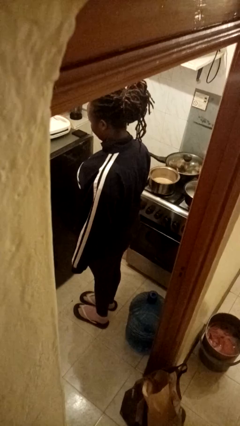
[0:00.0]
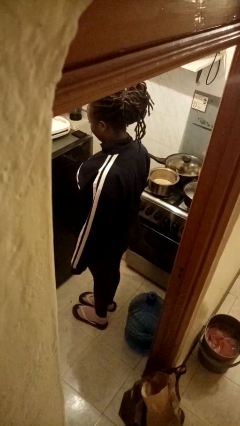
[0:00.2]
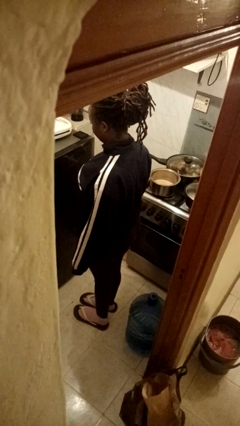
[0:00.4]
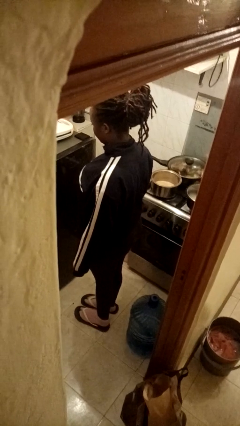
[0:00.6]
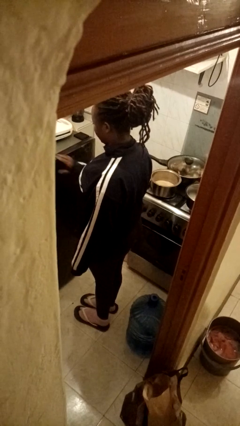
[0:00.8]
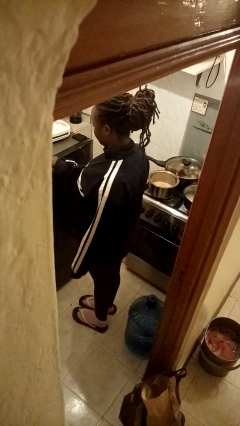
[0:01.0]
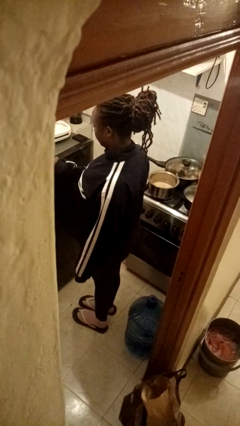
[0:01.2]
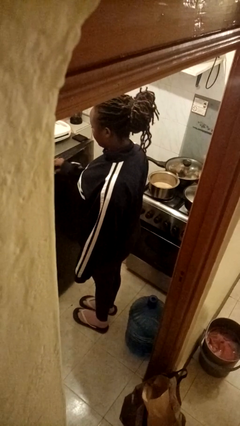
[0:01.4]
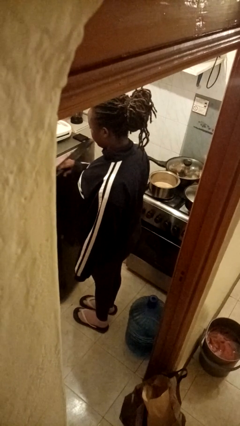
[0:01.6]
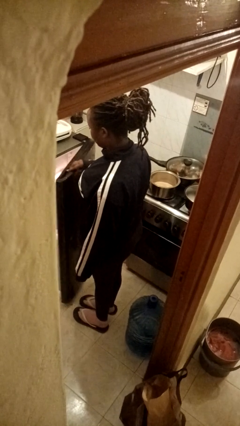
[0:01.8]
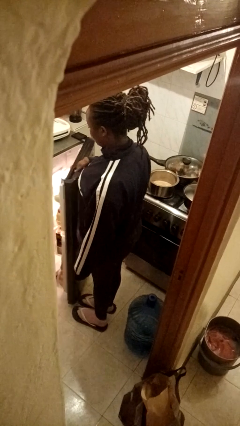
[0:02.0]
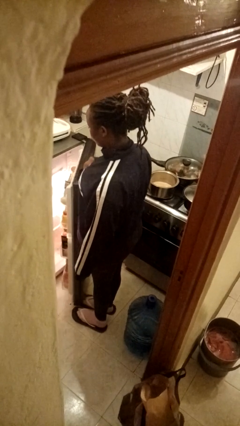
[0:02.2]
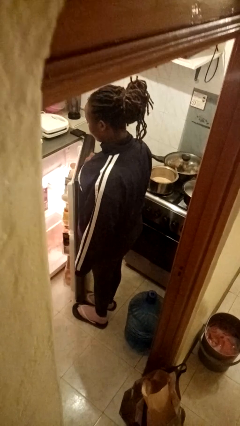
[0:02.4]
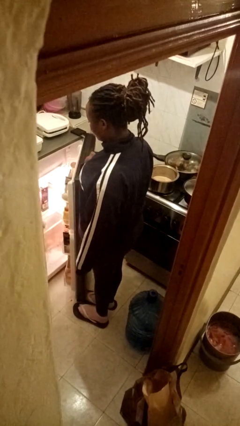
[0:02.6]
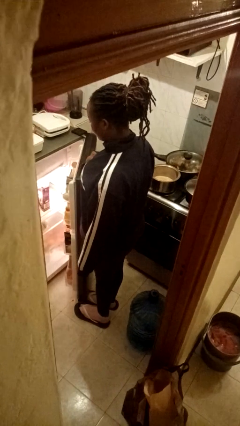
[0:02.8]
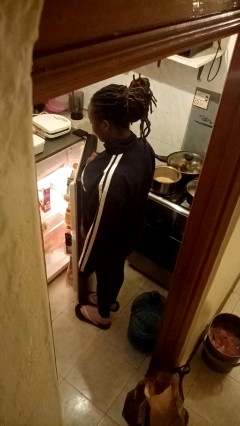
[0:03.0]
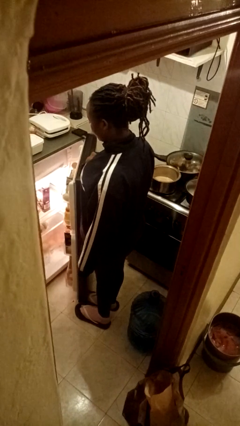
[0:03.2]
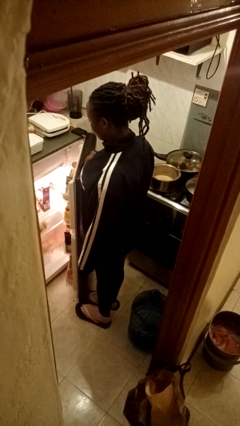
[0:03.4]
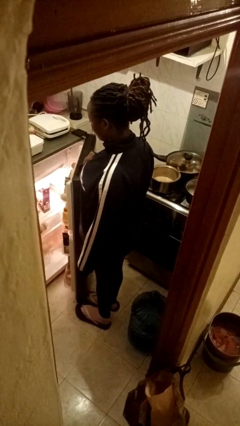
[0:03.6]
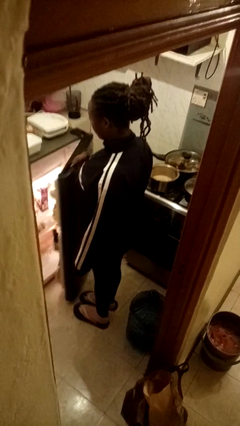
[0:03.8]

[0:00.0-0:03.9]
person opens refrigerator

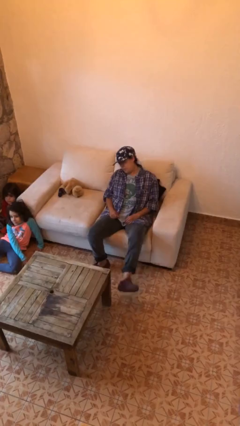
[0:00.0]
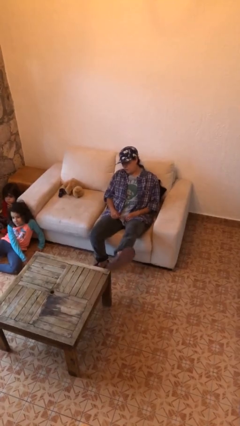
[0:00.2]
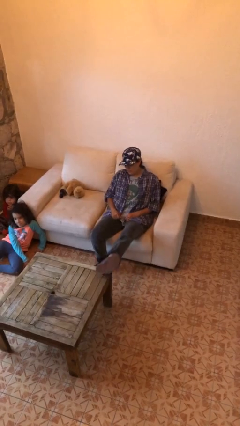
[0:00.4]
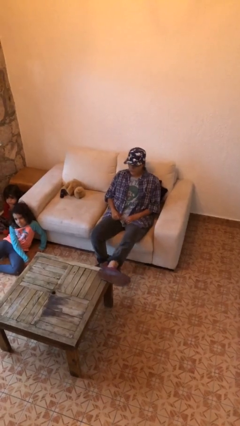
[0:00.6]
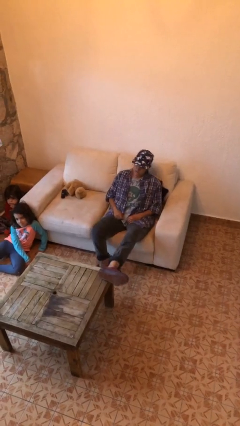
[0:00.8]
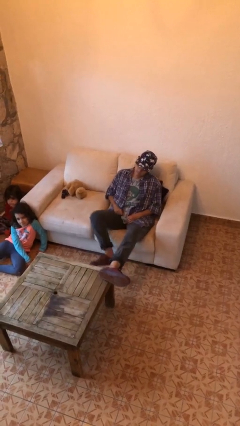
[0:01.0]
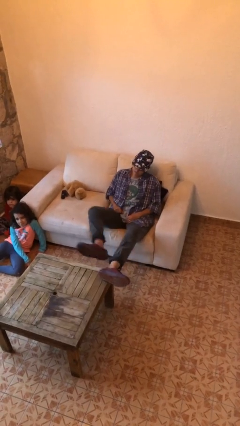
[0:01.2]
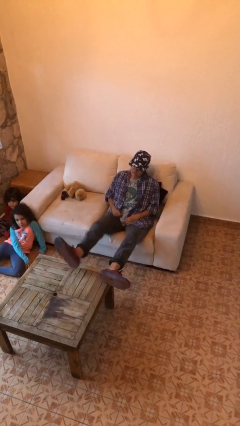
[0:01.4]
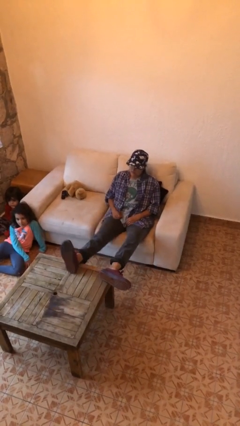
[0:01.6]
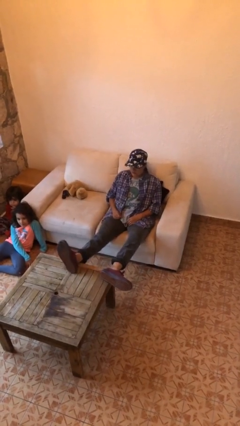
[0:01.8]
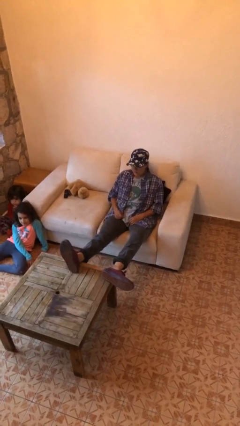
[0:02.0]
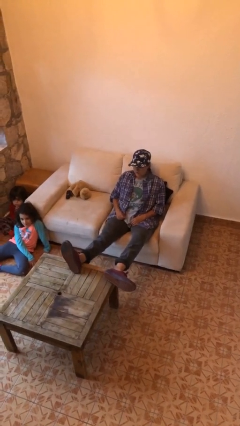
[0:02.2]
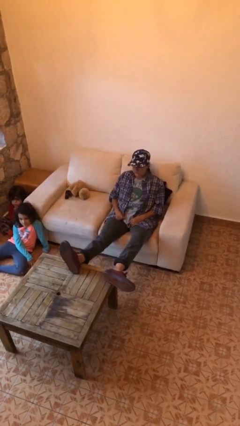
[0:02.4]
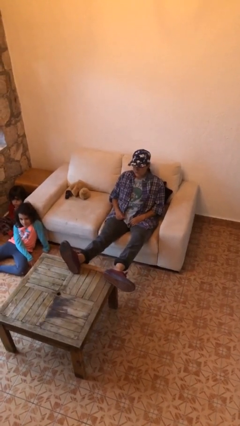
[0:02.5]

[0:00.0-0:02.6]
person puts feet up

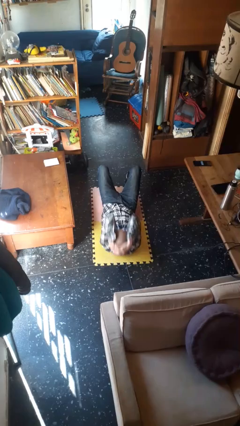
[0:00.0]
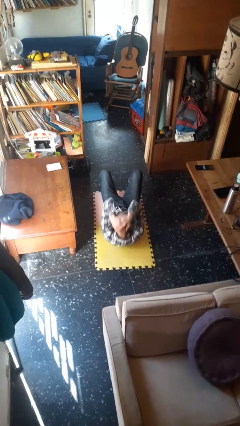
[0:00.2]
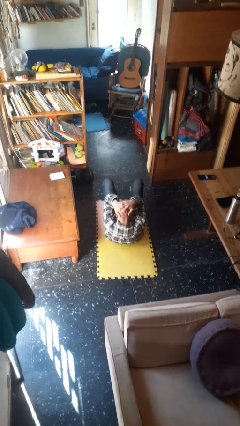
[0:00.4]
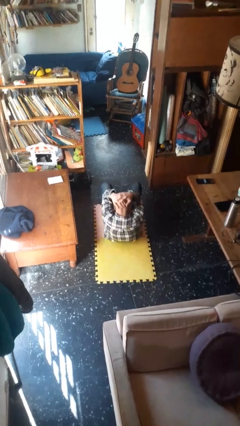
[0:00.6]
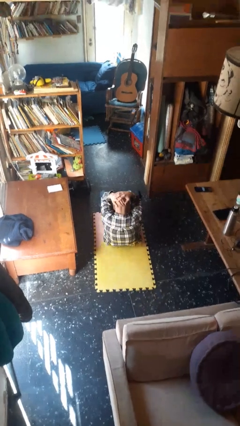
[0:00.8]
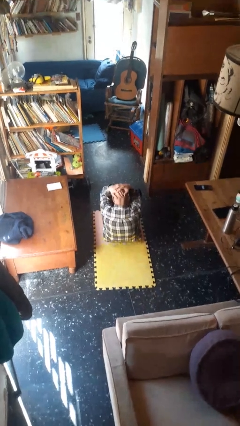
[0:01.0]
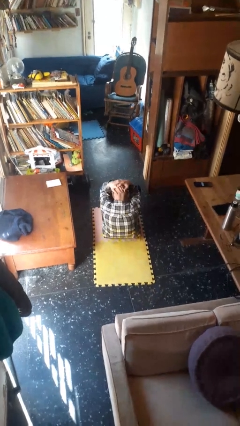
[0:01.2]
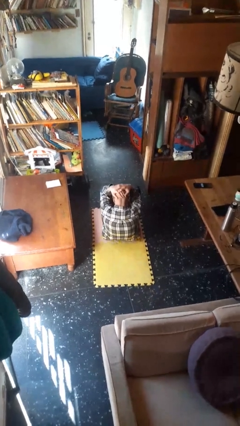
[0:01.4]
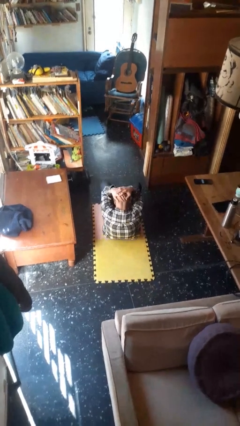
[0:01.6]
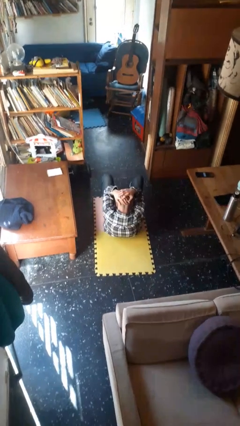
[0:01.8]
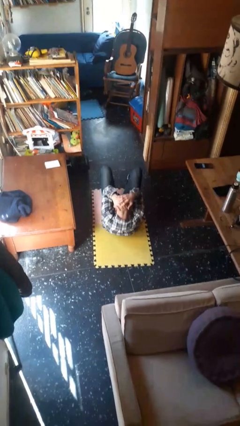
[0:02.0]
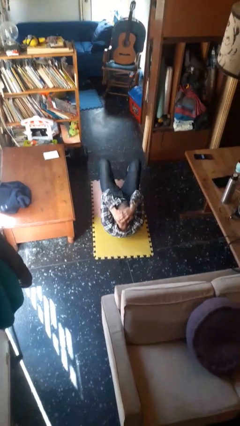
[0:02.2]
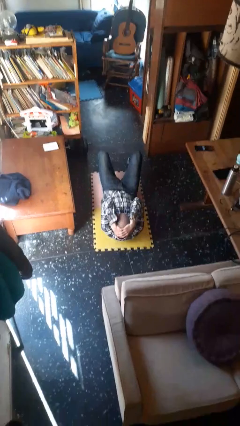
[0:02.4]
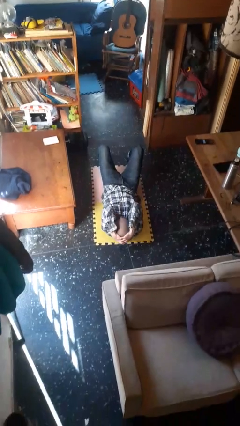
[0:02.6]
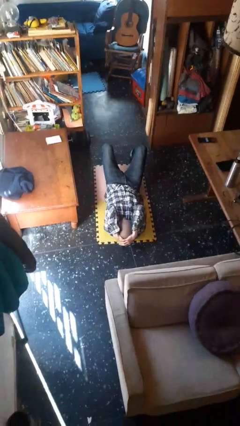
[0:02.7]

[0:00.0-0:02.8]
person exercises with situp

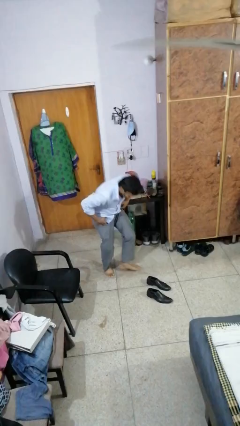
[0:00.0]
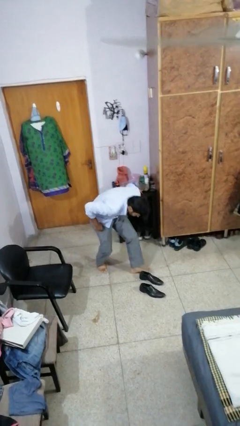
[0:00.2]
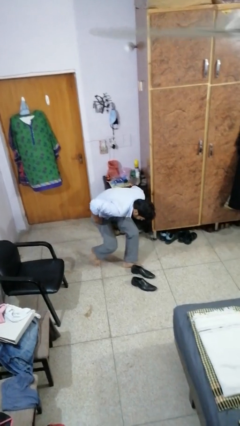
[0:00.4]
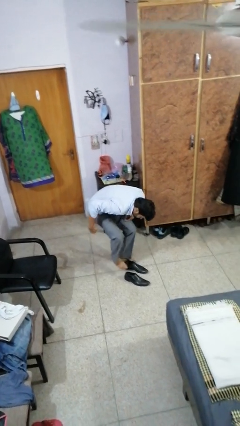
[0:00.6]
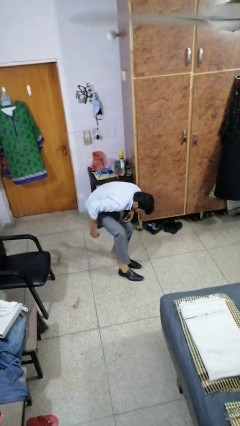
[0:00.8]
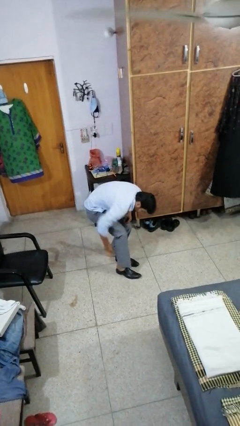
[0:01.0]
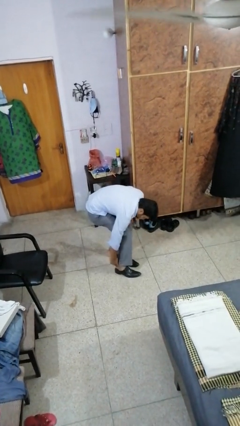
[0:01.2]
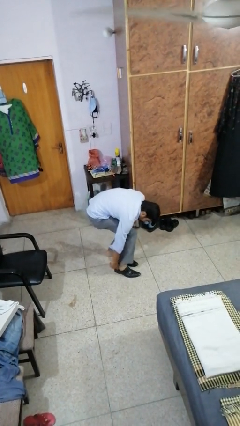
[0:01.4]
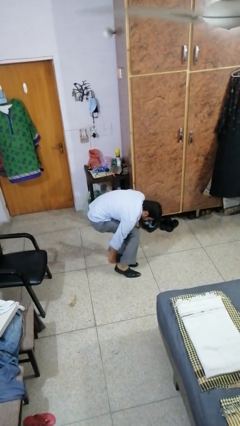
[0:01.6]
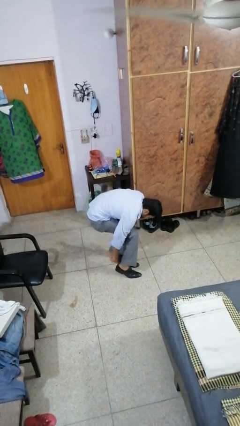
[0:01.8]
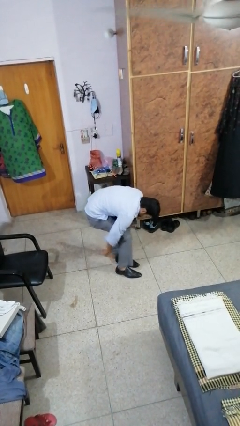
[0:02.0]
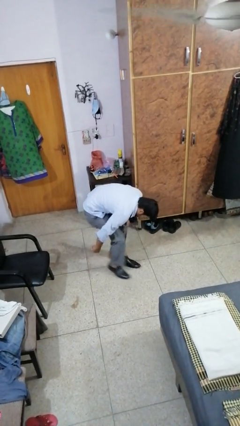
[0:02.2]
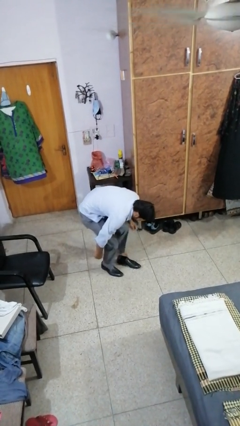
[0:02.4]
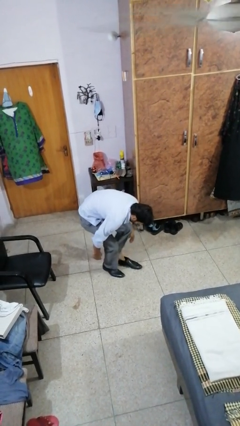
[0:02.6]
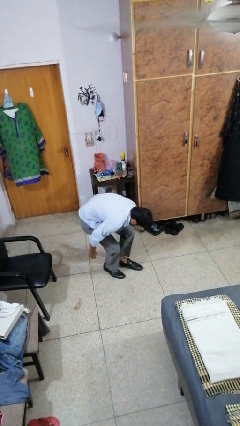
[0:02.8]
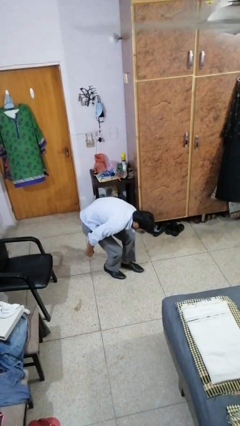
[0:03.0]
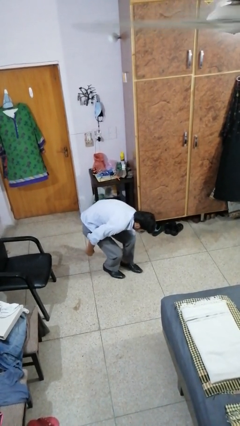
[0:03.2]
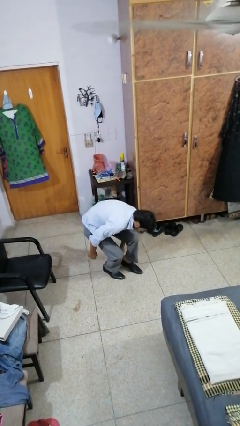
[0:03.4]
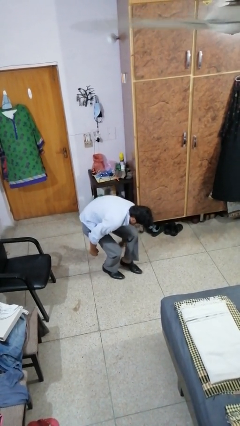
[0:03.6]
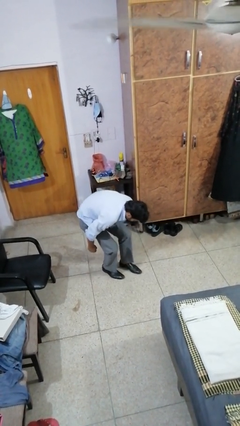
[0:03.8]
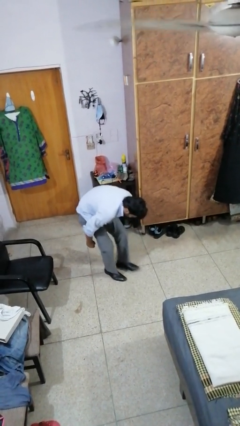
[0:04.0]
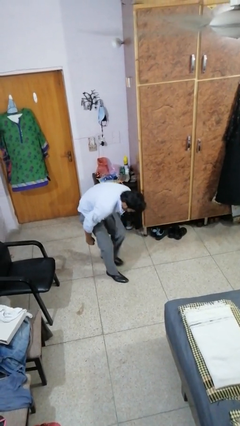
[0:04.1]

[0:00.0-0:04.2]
person puts on shoes

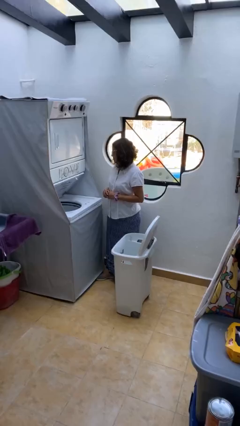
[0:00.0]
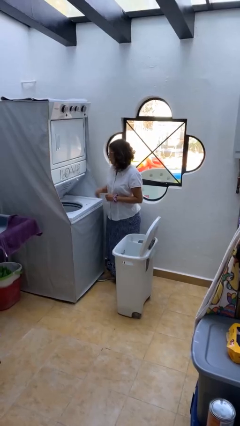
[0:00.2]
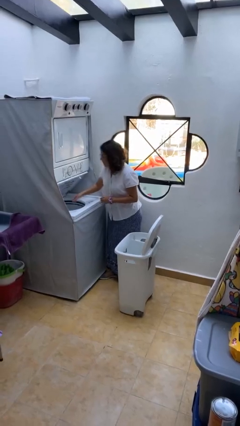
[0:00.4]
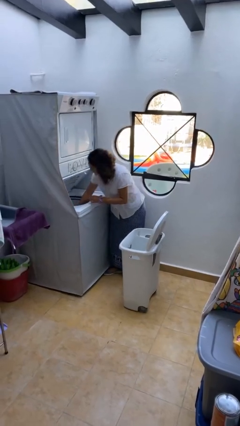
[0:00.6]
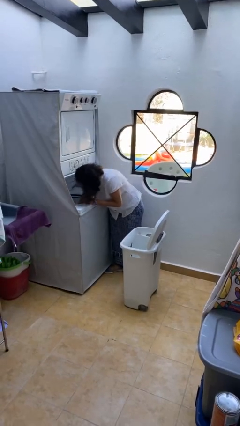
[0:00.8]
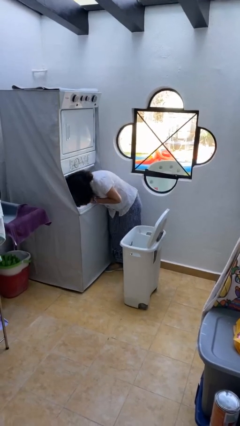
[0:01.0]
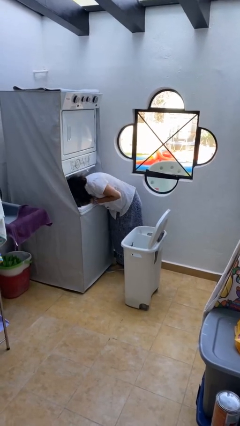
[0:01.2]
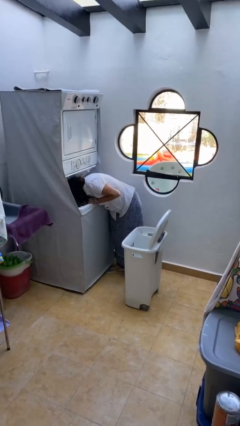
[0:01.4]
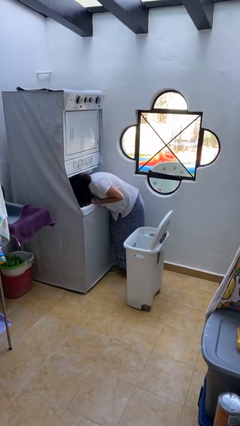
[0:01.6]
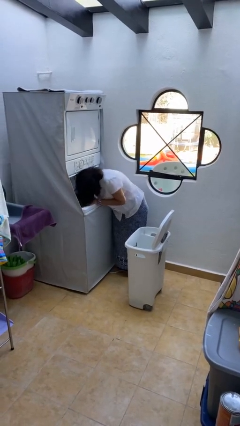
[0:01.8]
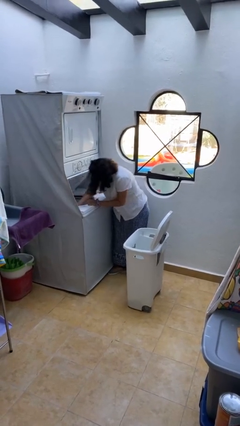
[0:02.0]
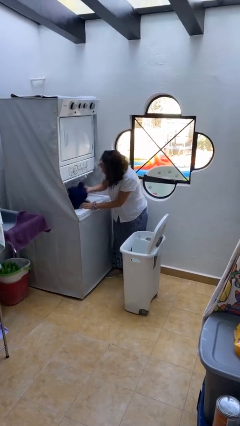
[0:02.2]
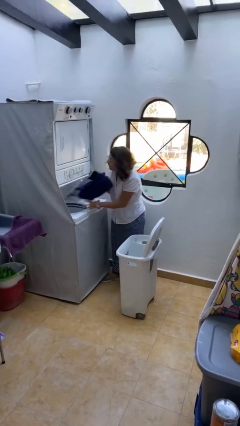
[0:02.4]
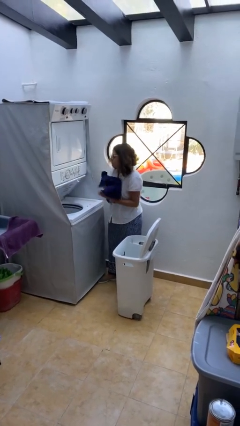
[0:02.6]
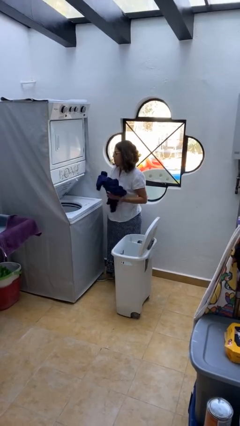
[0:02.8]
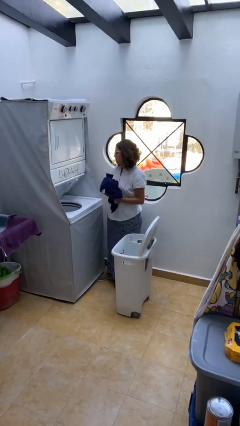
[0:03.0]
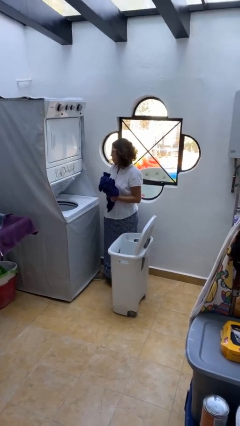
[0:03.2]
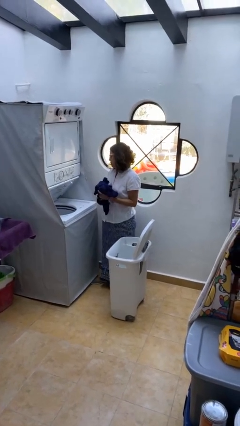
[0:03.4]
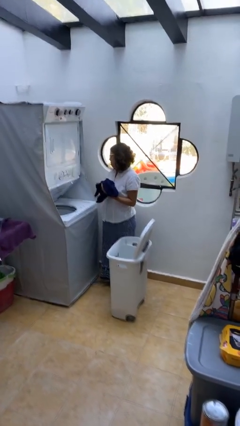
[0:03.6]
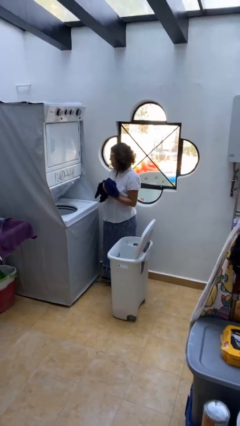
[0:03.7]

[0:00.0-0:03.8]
person loads clotheswasher

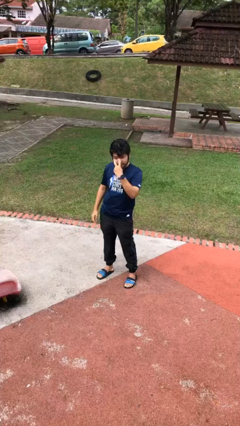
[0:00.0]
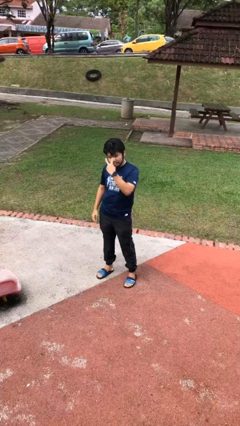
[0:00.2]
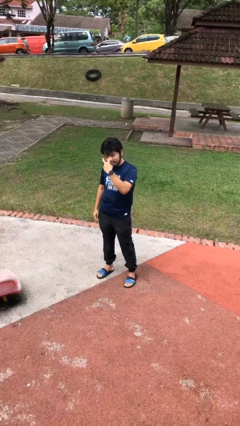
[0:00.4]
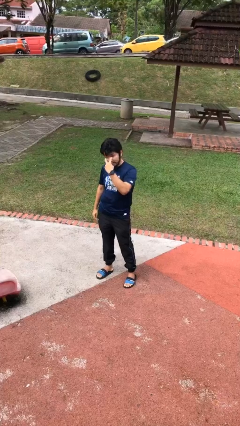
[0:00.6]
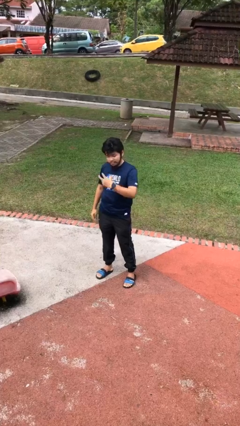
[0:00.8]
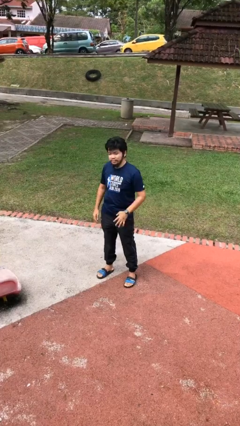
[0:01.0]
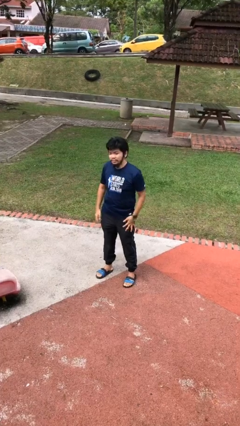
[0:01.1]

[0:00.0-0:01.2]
person gestures watch closely
